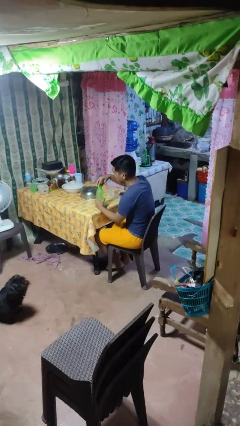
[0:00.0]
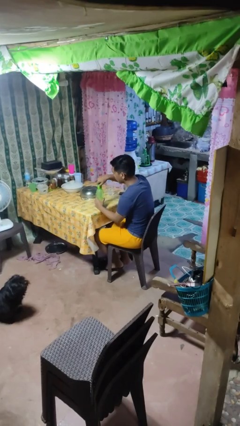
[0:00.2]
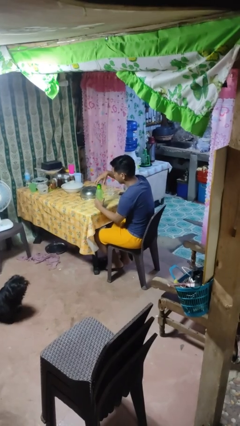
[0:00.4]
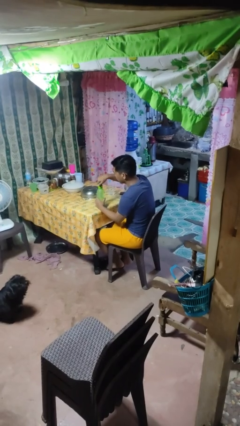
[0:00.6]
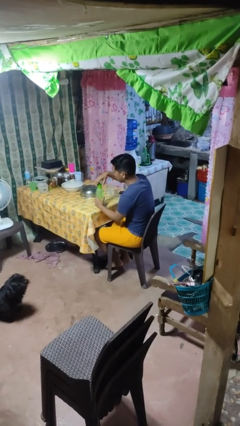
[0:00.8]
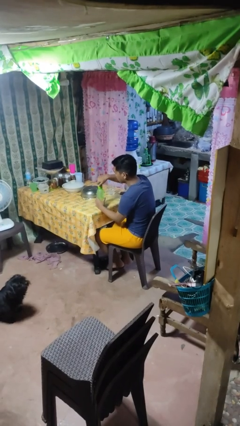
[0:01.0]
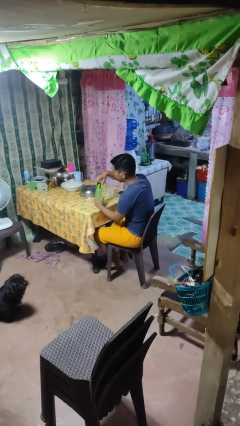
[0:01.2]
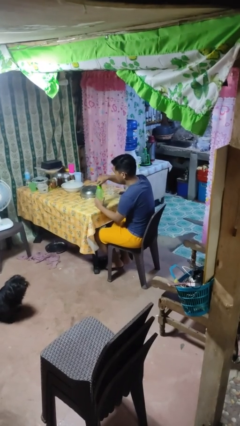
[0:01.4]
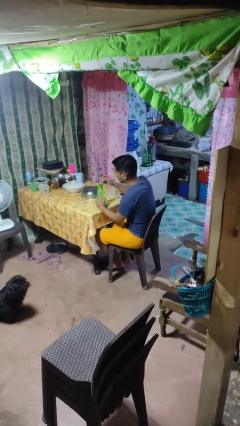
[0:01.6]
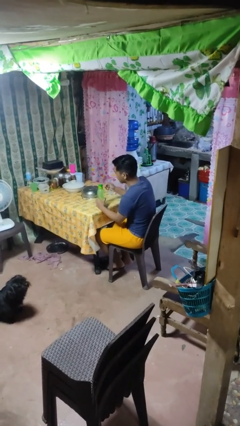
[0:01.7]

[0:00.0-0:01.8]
person screws lid to bottle

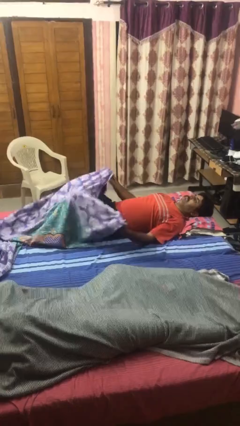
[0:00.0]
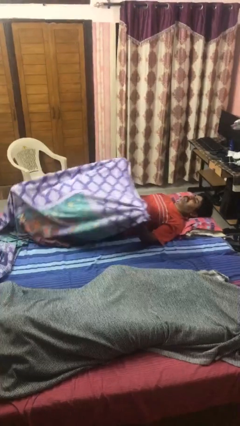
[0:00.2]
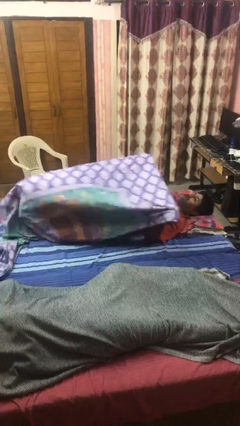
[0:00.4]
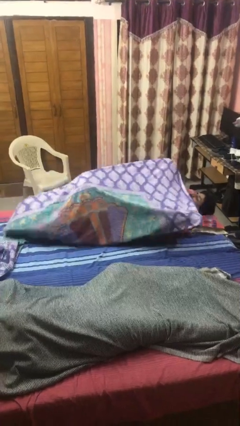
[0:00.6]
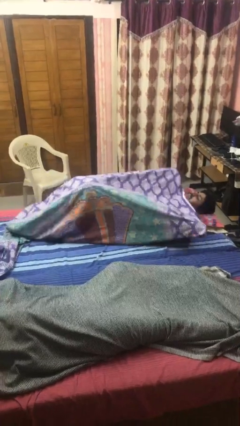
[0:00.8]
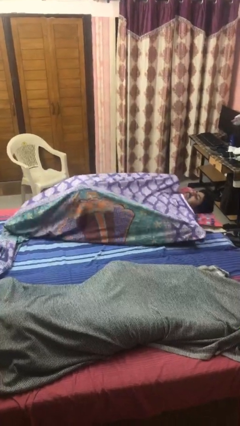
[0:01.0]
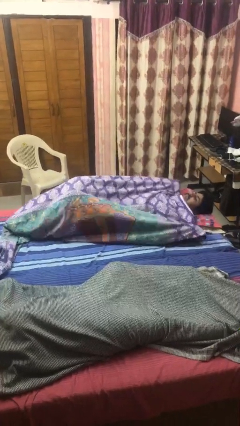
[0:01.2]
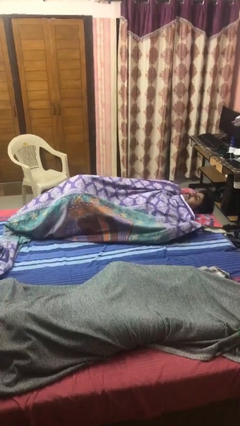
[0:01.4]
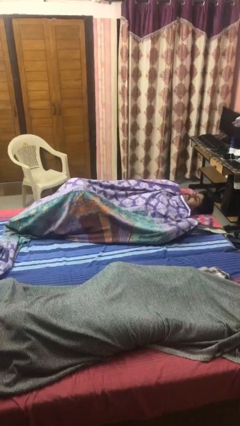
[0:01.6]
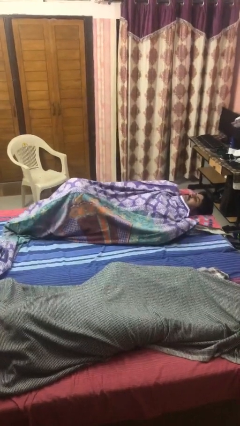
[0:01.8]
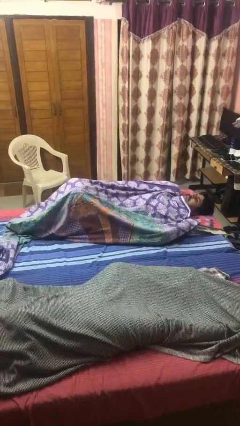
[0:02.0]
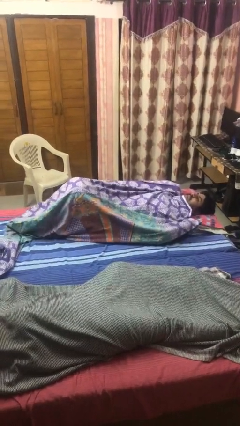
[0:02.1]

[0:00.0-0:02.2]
person covers with bedsheets

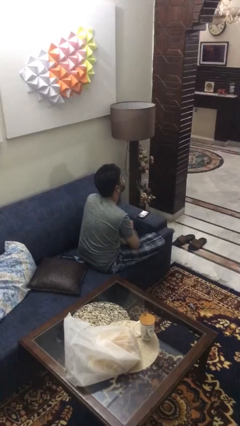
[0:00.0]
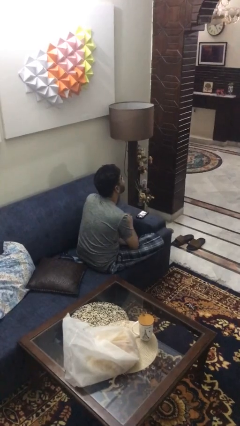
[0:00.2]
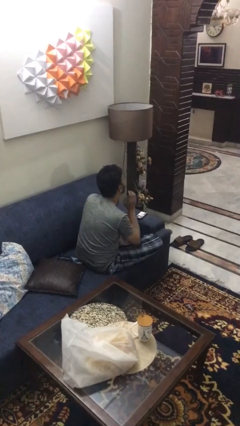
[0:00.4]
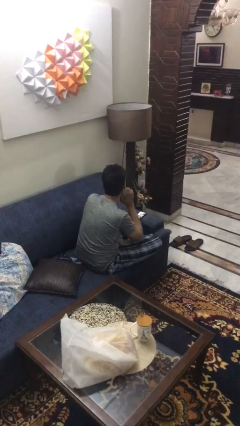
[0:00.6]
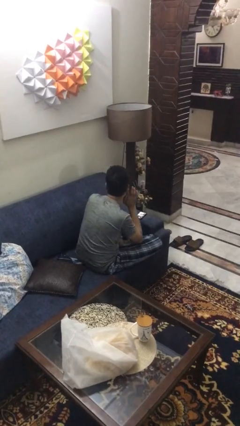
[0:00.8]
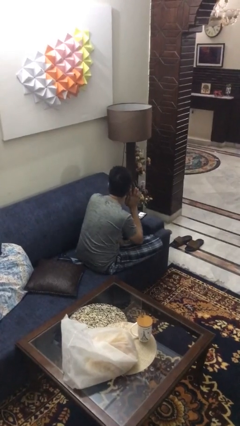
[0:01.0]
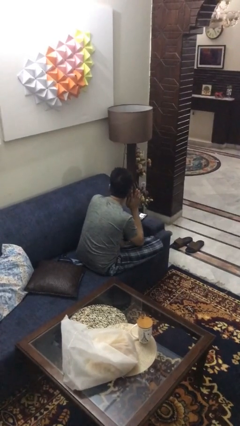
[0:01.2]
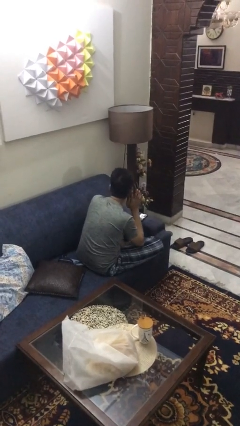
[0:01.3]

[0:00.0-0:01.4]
person gestures listen closely

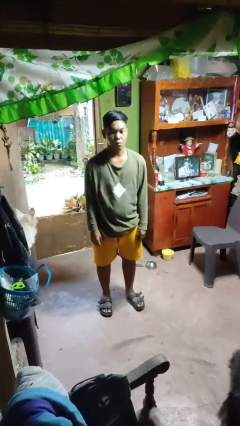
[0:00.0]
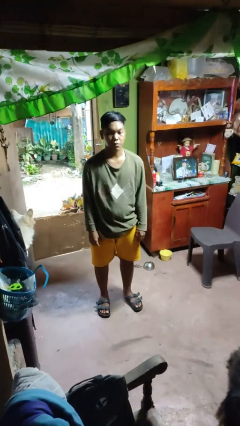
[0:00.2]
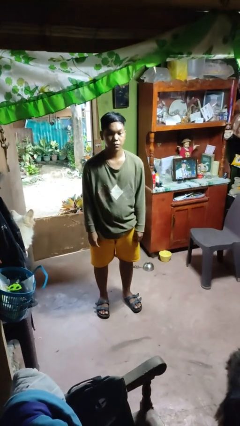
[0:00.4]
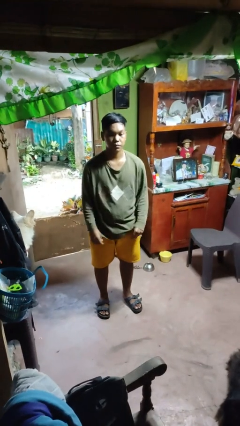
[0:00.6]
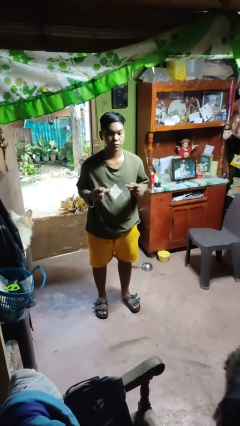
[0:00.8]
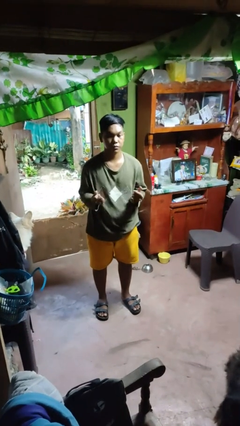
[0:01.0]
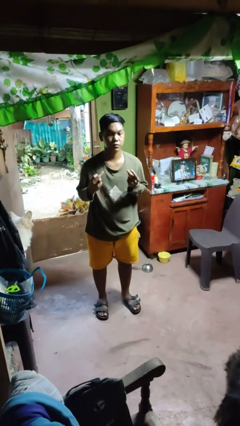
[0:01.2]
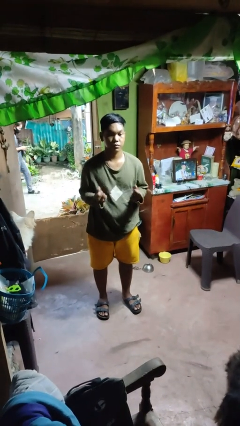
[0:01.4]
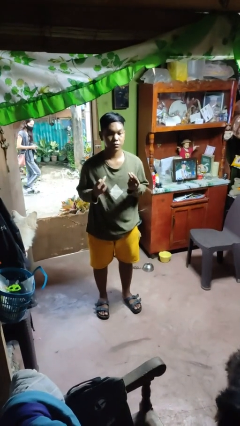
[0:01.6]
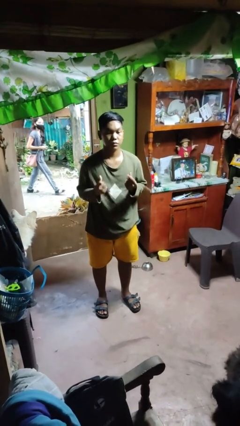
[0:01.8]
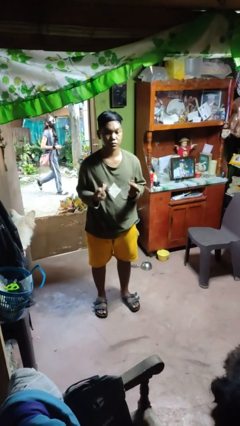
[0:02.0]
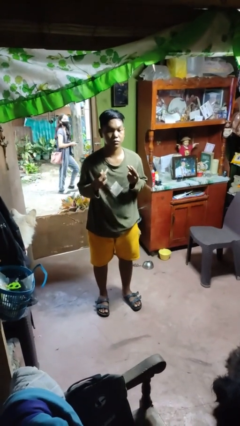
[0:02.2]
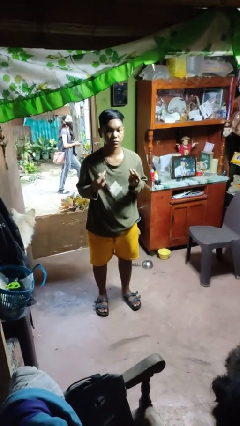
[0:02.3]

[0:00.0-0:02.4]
person snaps fingers

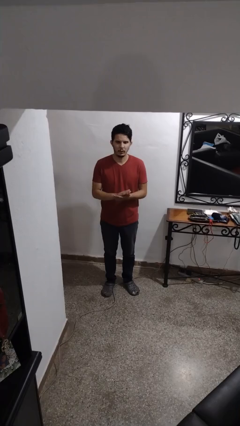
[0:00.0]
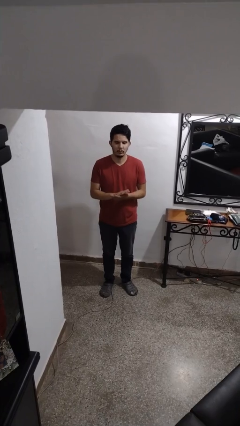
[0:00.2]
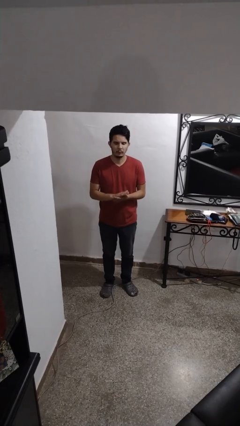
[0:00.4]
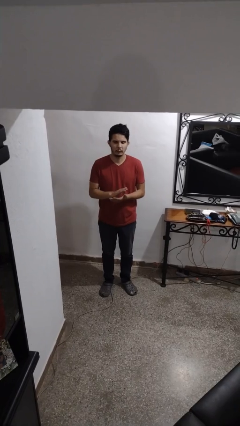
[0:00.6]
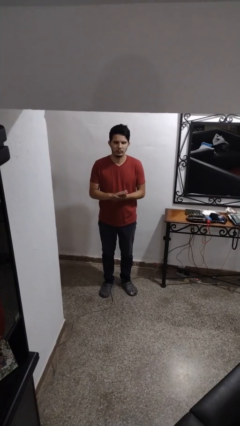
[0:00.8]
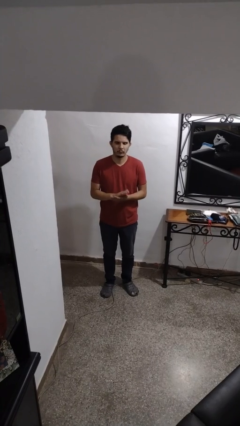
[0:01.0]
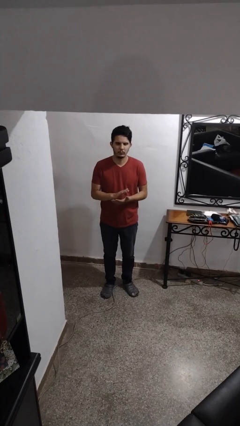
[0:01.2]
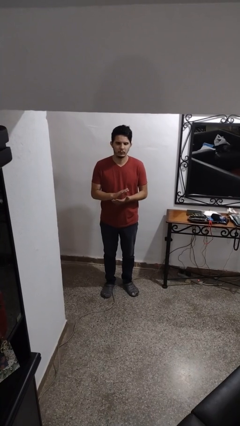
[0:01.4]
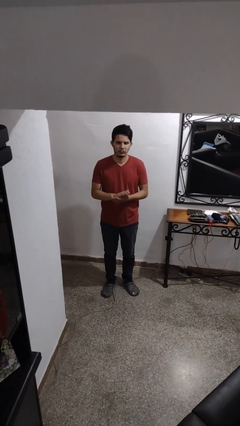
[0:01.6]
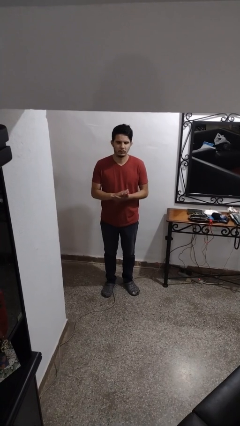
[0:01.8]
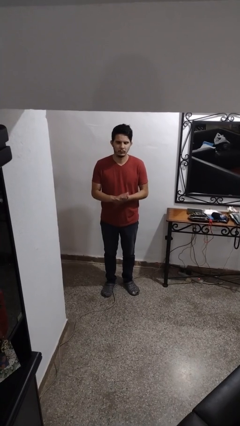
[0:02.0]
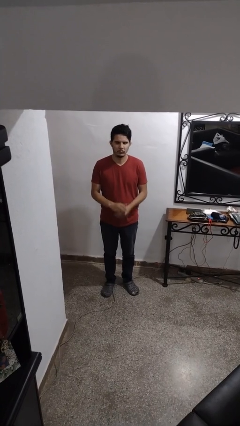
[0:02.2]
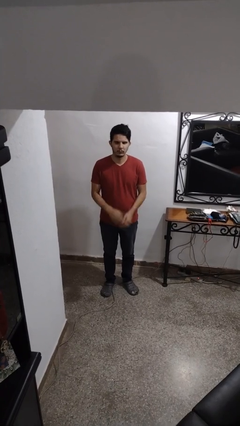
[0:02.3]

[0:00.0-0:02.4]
person claps hands

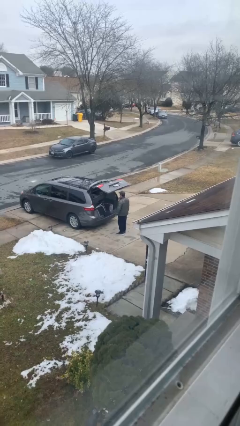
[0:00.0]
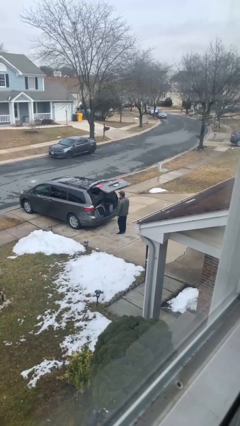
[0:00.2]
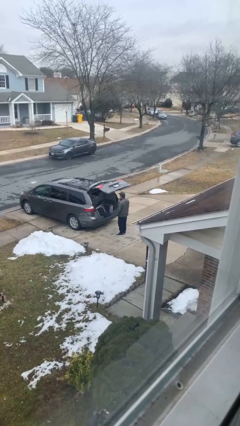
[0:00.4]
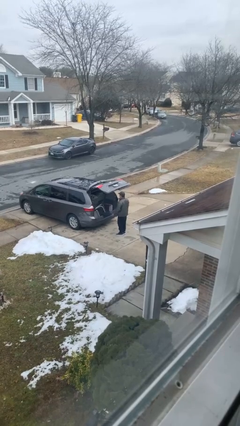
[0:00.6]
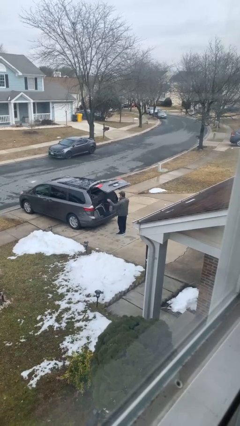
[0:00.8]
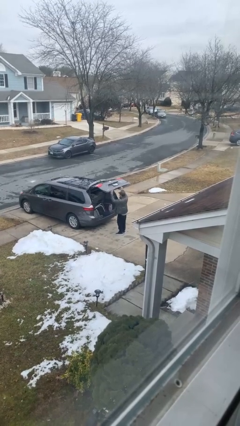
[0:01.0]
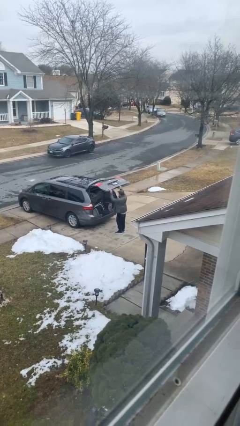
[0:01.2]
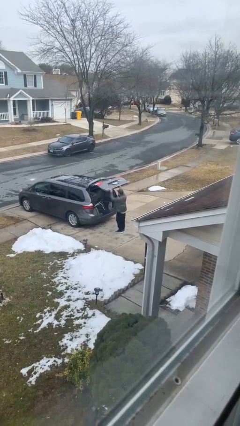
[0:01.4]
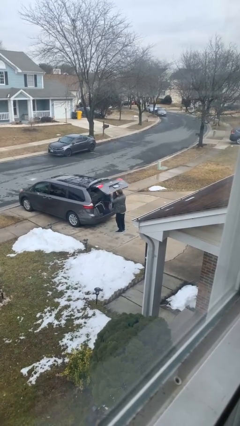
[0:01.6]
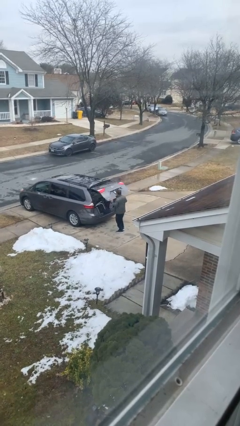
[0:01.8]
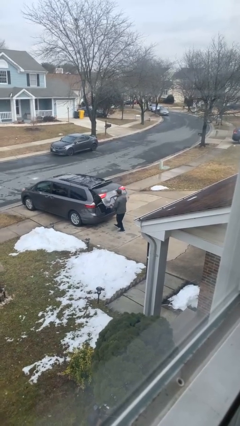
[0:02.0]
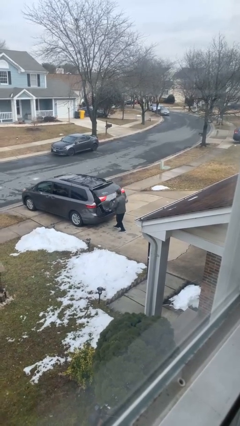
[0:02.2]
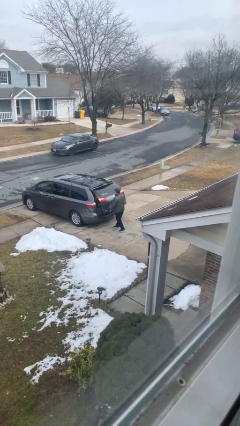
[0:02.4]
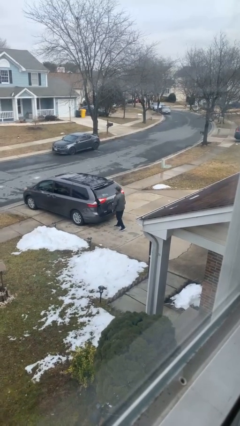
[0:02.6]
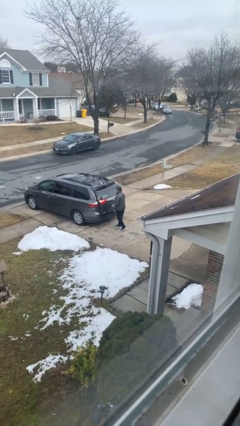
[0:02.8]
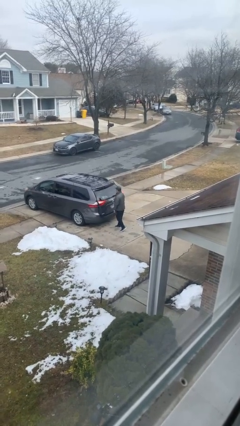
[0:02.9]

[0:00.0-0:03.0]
person closes car trunk

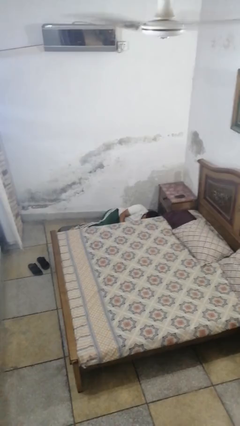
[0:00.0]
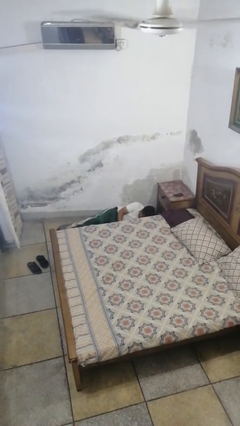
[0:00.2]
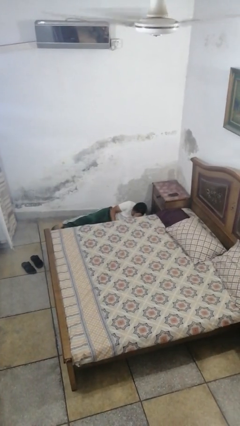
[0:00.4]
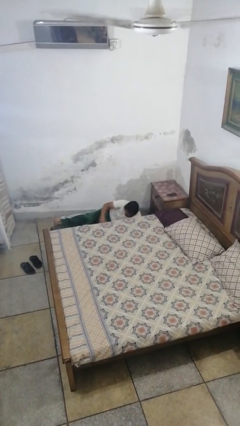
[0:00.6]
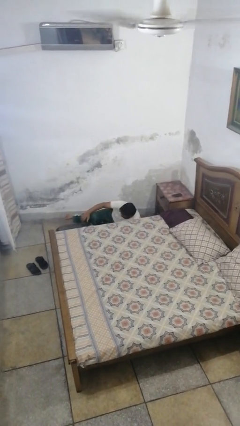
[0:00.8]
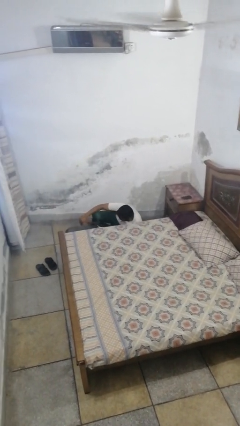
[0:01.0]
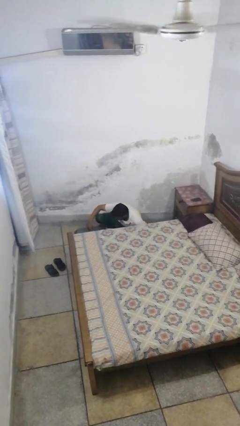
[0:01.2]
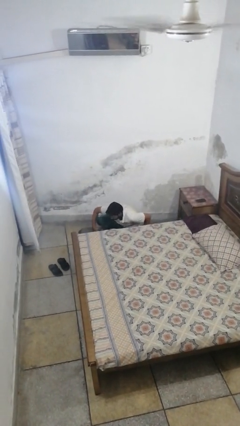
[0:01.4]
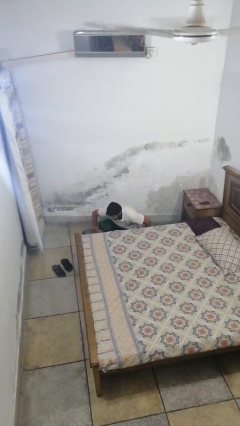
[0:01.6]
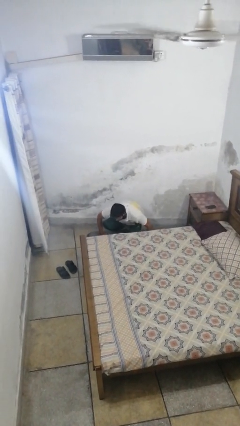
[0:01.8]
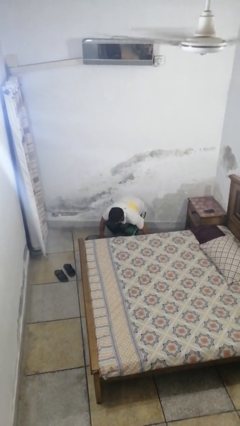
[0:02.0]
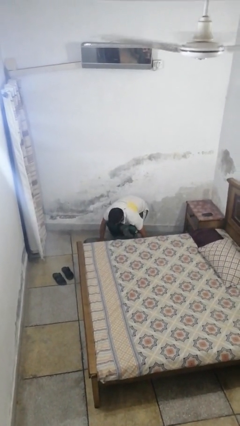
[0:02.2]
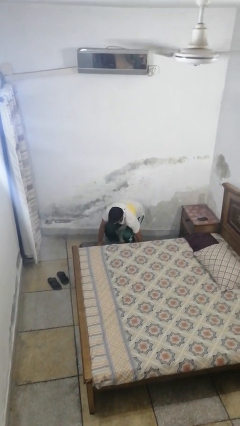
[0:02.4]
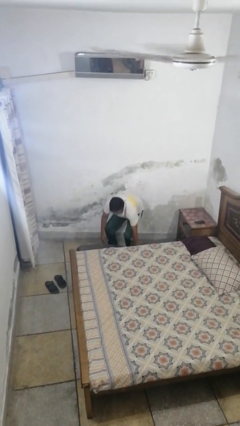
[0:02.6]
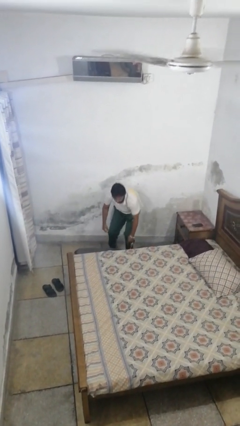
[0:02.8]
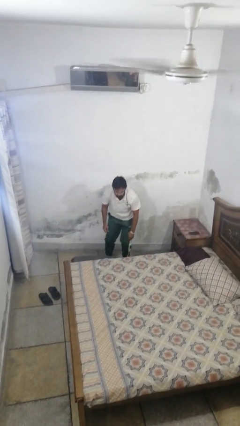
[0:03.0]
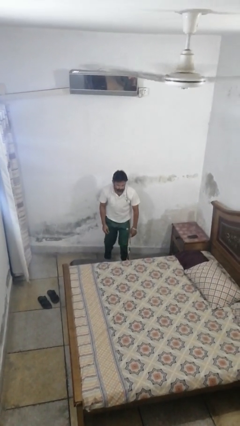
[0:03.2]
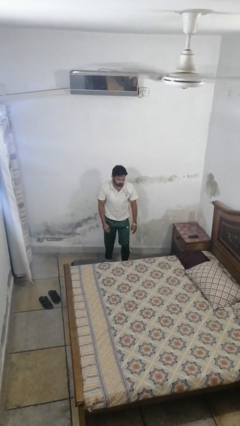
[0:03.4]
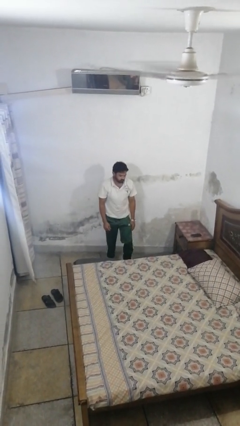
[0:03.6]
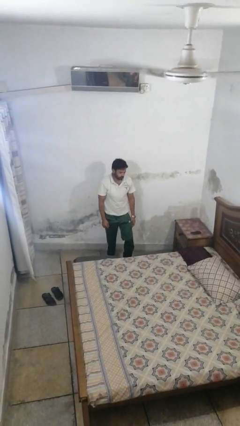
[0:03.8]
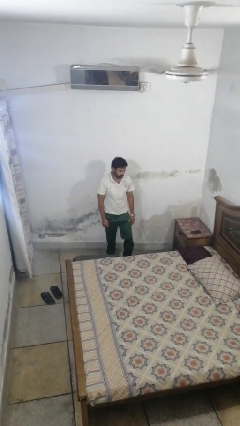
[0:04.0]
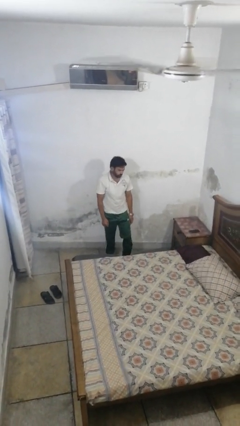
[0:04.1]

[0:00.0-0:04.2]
person stands up from floor
